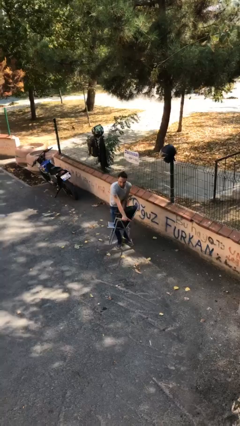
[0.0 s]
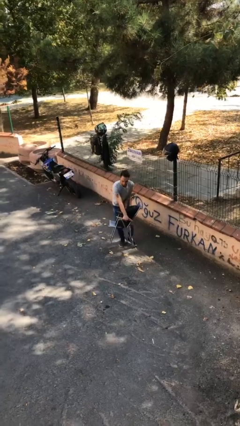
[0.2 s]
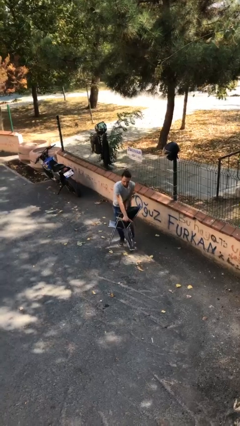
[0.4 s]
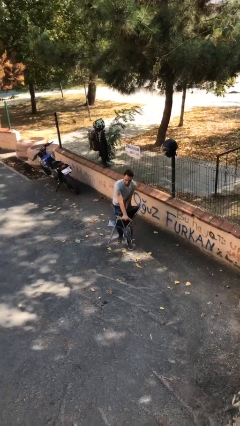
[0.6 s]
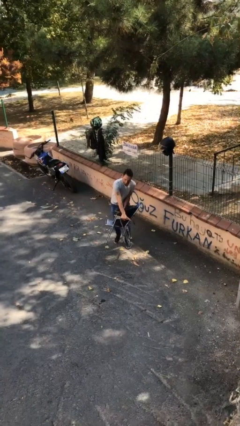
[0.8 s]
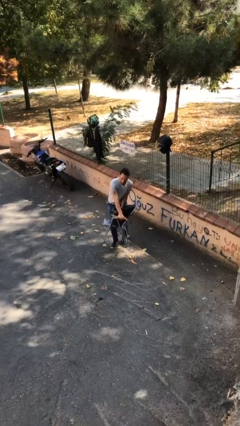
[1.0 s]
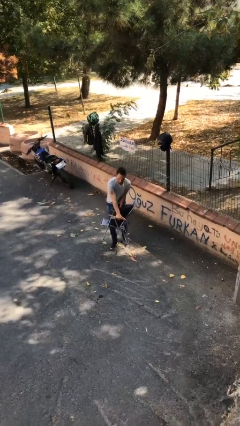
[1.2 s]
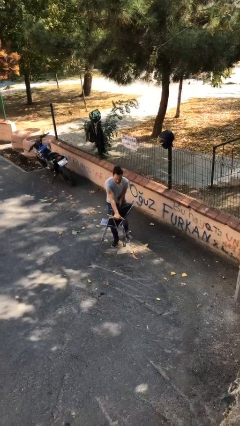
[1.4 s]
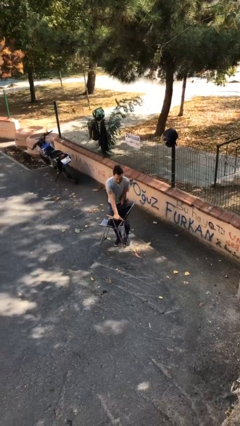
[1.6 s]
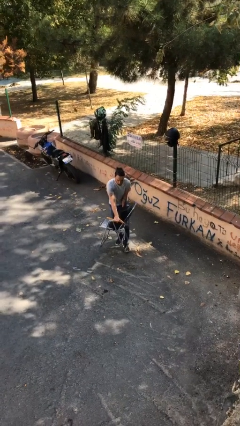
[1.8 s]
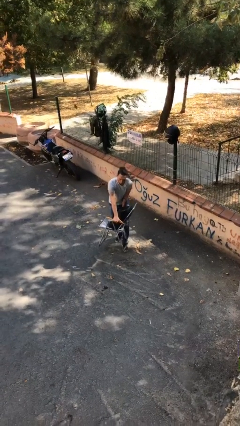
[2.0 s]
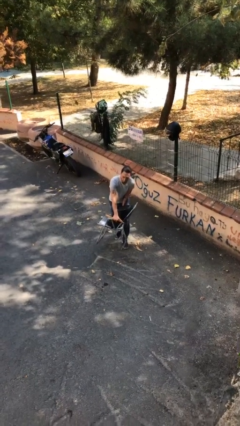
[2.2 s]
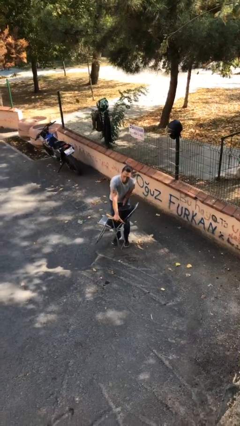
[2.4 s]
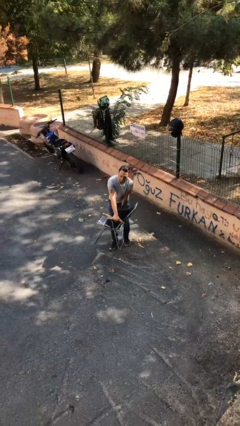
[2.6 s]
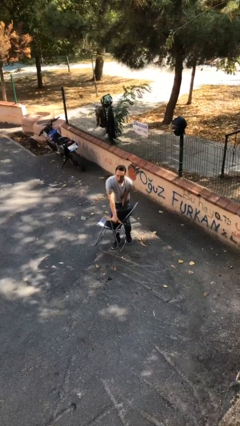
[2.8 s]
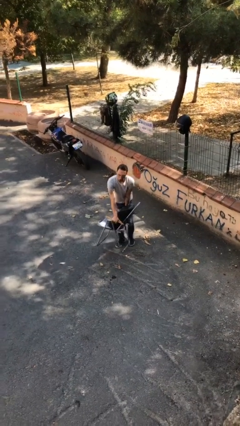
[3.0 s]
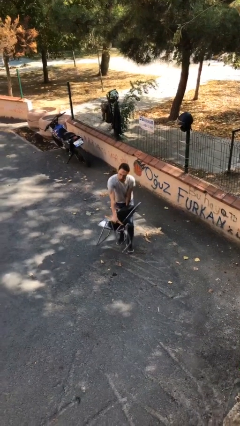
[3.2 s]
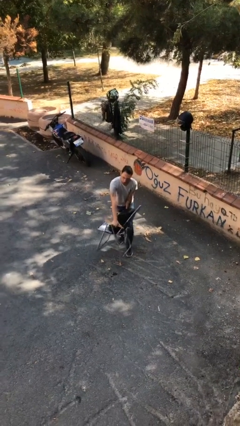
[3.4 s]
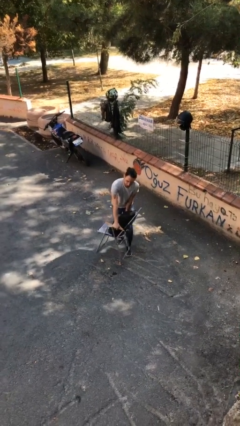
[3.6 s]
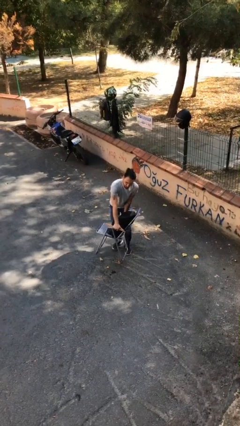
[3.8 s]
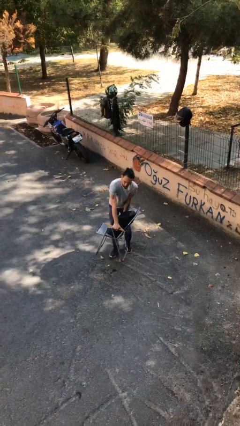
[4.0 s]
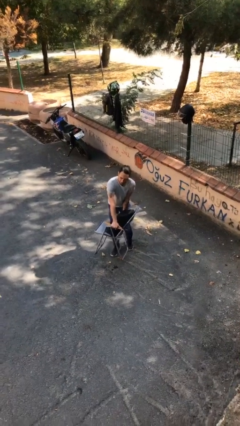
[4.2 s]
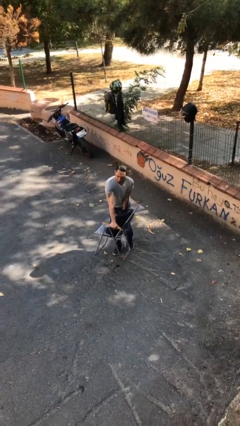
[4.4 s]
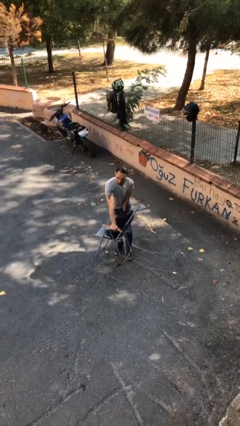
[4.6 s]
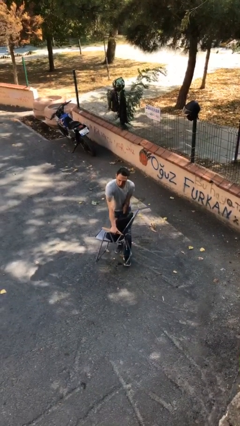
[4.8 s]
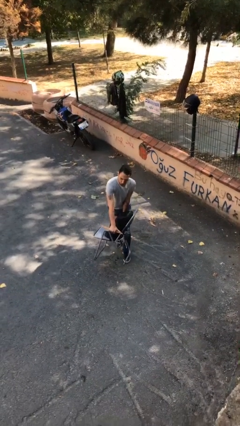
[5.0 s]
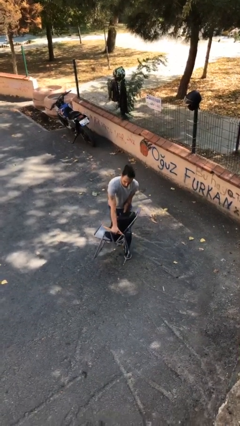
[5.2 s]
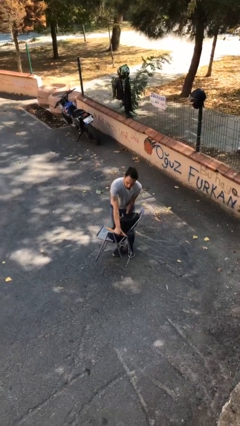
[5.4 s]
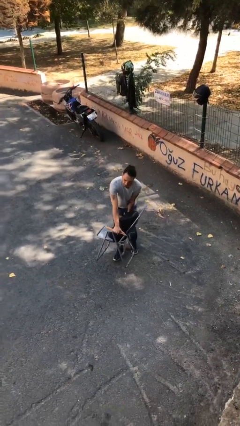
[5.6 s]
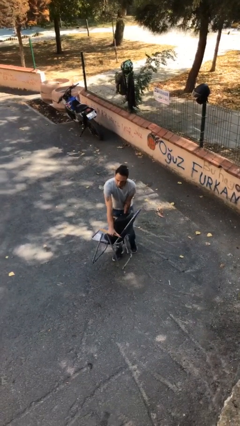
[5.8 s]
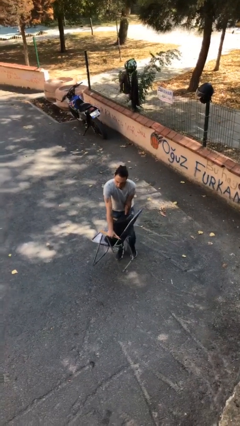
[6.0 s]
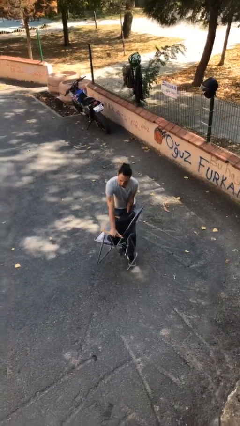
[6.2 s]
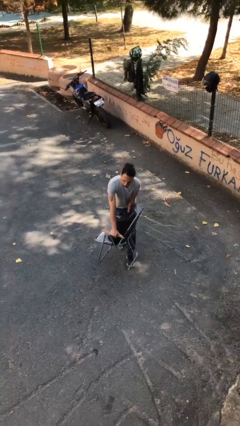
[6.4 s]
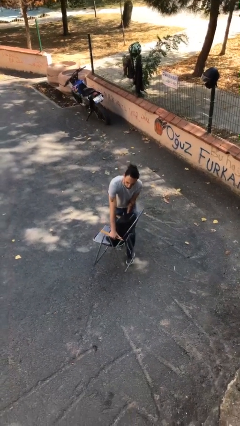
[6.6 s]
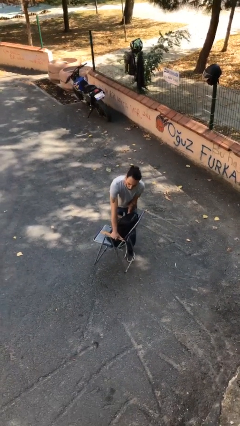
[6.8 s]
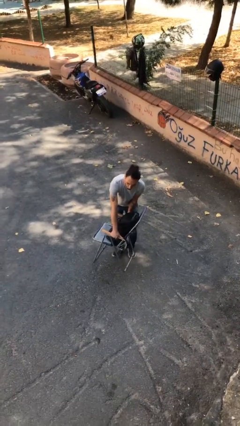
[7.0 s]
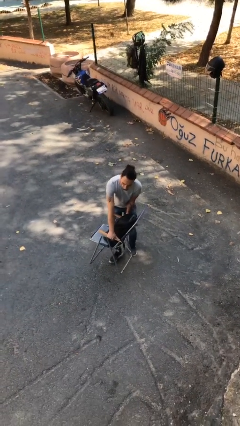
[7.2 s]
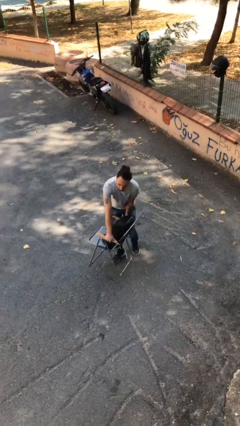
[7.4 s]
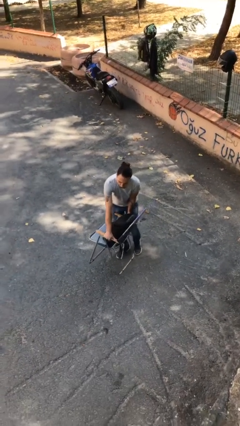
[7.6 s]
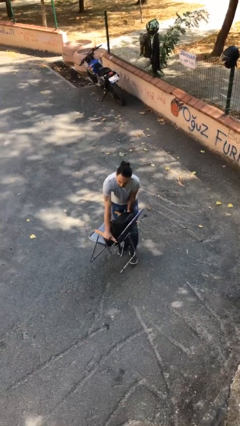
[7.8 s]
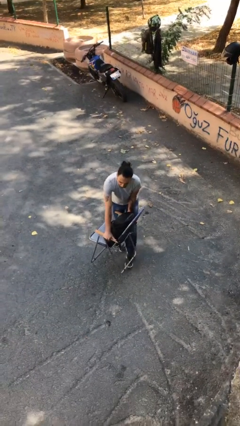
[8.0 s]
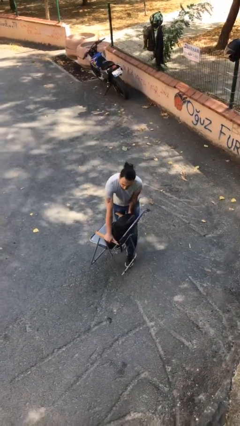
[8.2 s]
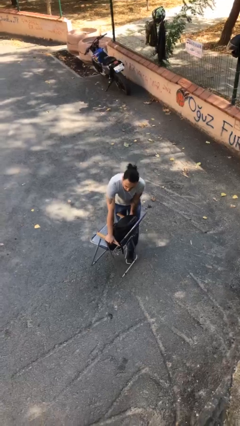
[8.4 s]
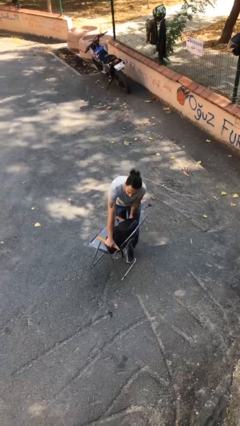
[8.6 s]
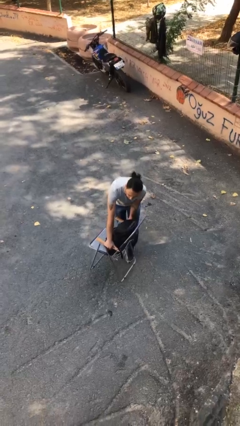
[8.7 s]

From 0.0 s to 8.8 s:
person carries heavy object

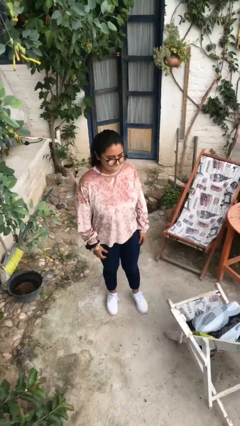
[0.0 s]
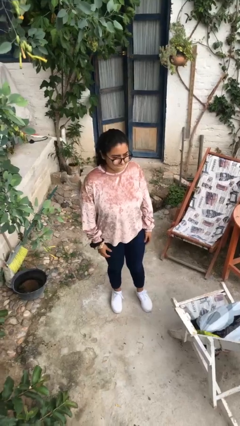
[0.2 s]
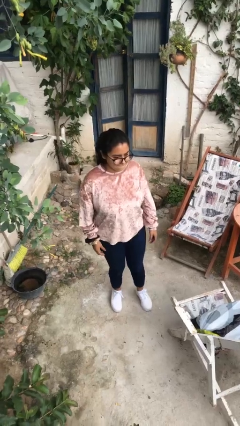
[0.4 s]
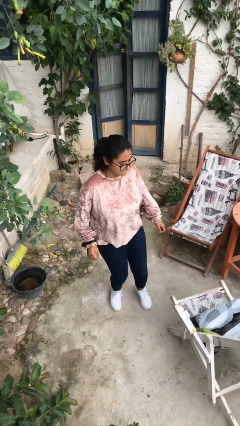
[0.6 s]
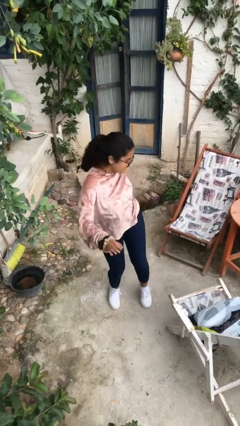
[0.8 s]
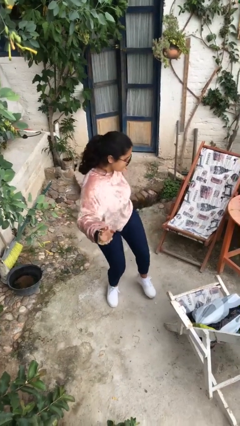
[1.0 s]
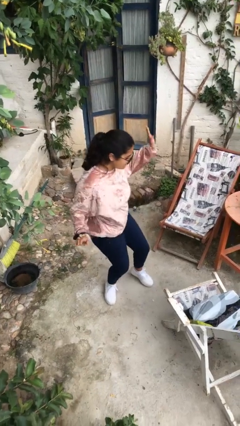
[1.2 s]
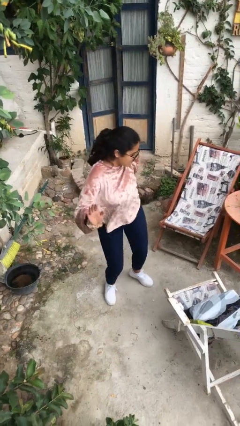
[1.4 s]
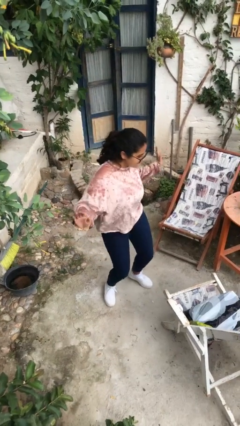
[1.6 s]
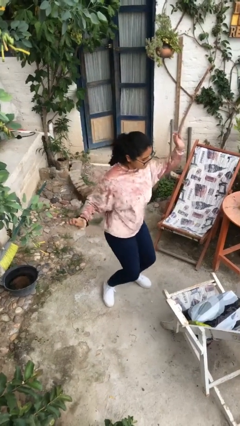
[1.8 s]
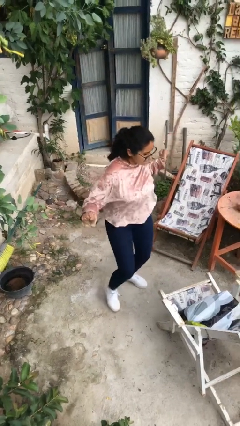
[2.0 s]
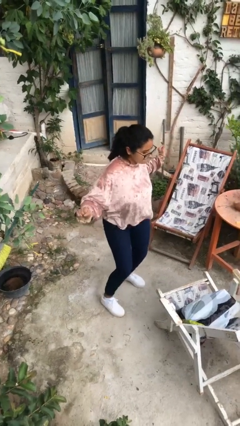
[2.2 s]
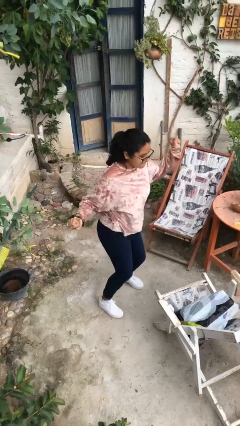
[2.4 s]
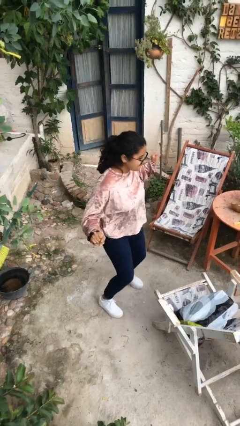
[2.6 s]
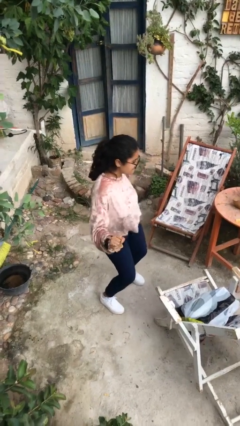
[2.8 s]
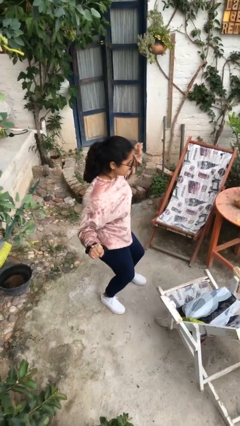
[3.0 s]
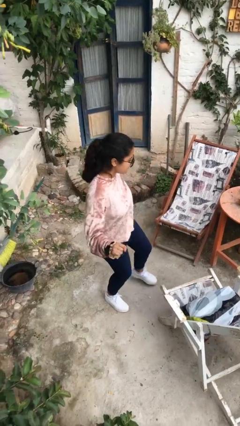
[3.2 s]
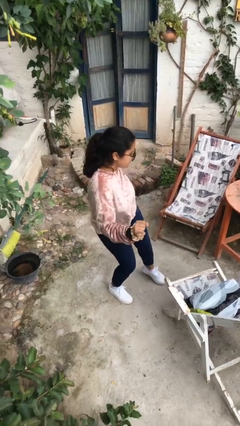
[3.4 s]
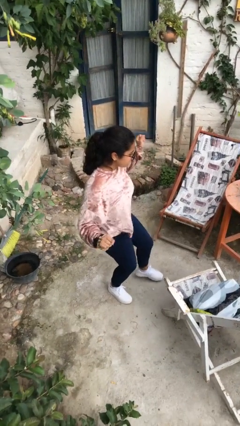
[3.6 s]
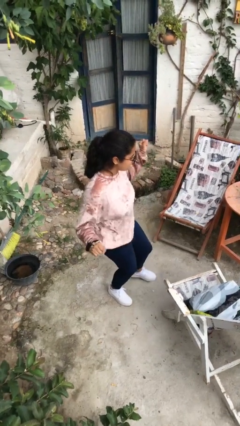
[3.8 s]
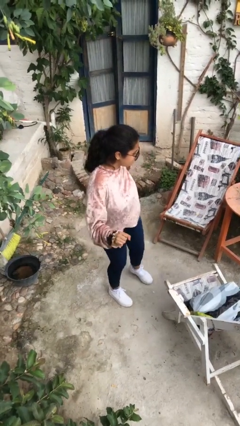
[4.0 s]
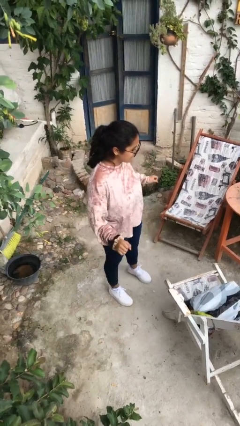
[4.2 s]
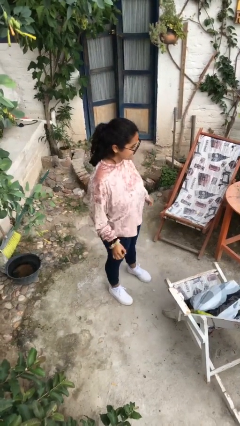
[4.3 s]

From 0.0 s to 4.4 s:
person dances in place

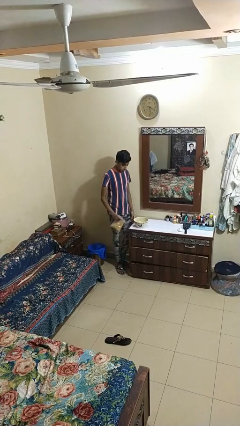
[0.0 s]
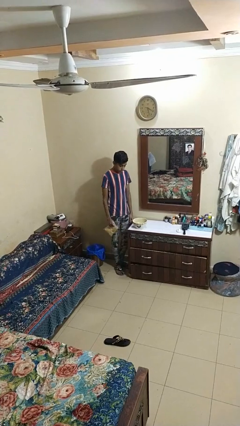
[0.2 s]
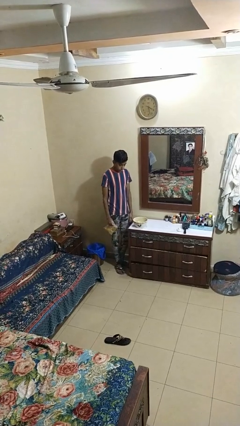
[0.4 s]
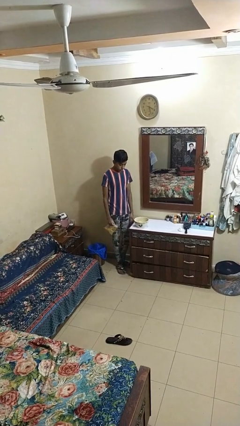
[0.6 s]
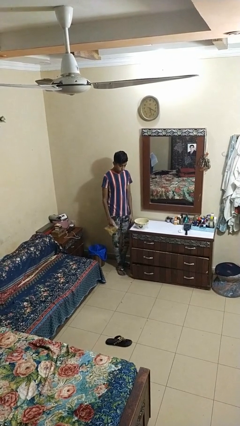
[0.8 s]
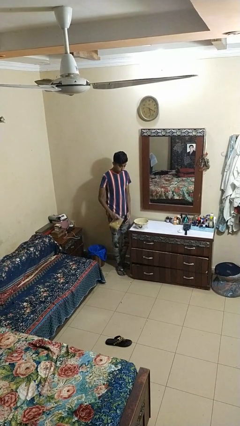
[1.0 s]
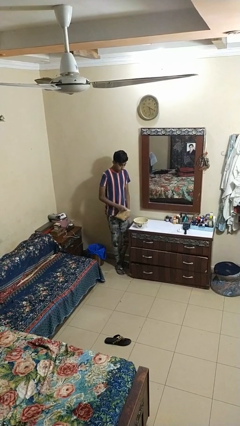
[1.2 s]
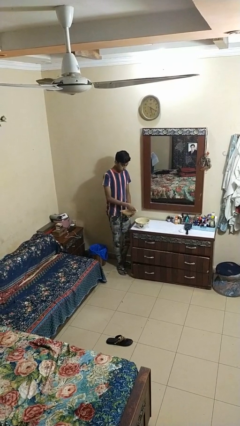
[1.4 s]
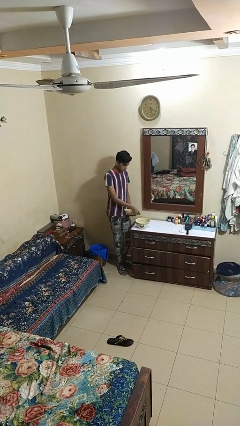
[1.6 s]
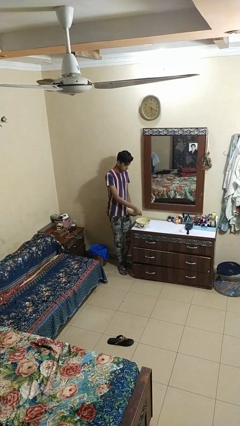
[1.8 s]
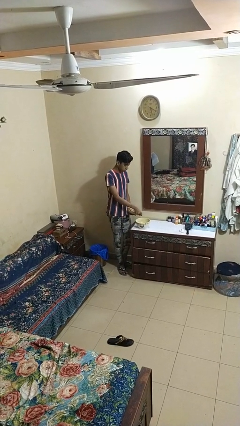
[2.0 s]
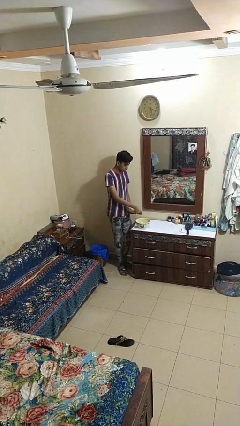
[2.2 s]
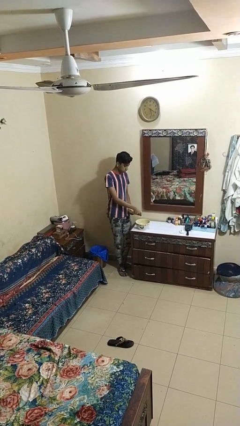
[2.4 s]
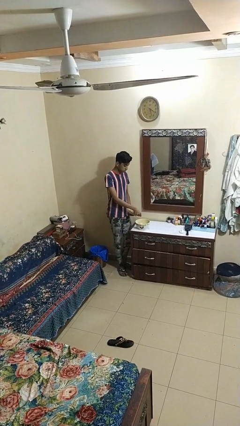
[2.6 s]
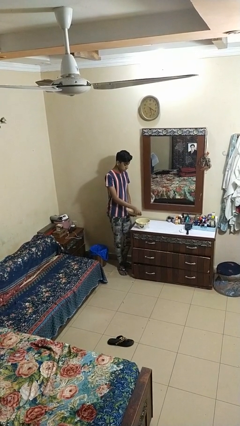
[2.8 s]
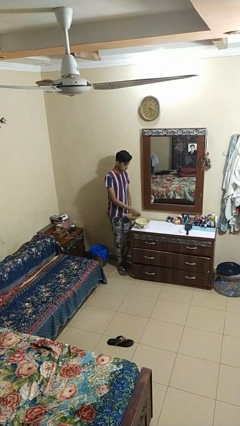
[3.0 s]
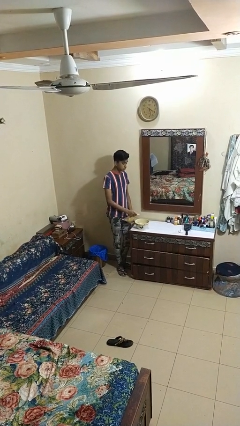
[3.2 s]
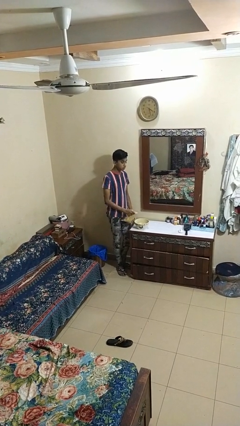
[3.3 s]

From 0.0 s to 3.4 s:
person pours into bowl

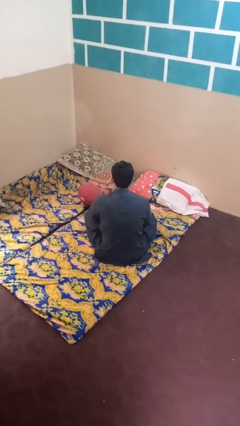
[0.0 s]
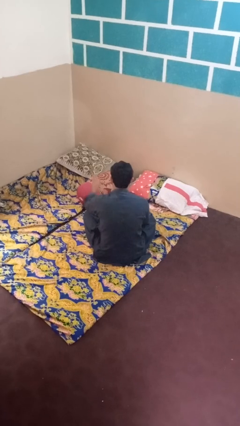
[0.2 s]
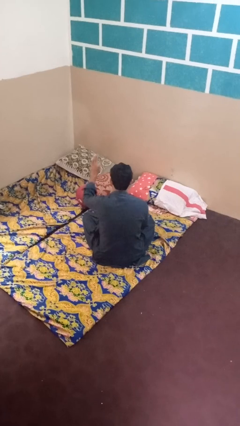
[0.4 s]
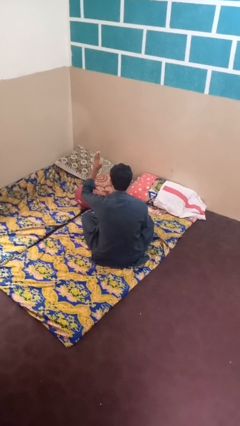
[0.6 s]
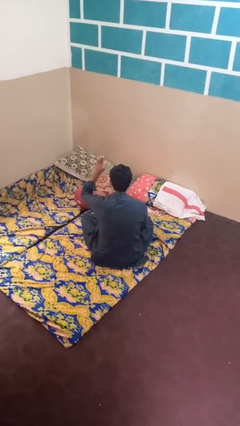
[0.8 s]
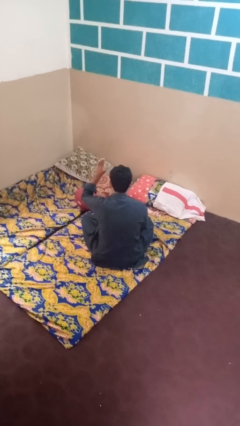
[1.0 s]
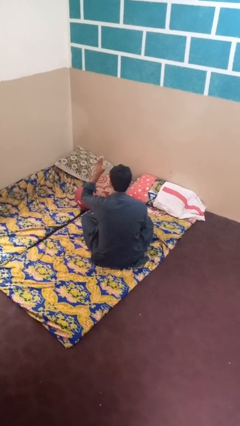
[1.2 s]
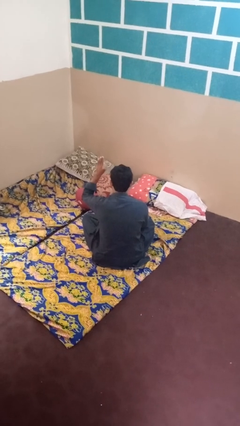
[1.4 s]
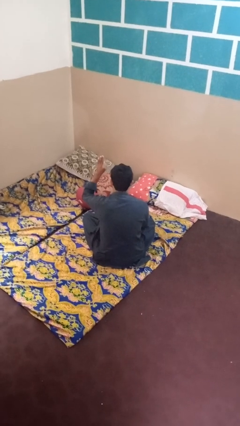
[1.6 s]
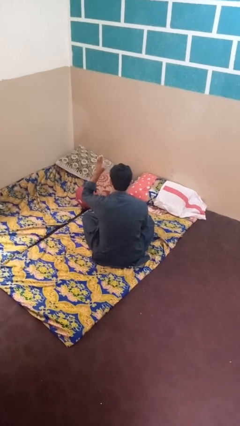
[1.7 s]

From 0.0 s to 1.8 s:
person gestures number three
